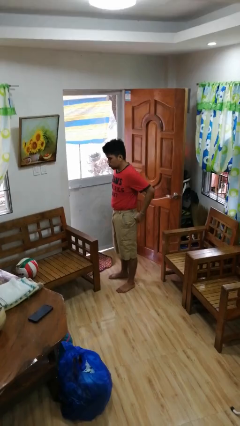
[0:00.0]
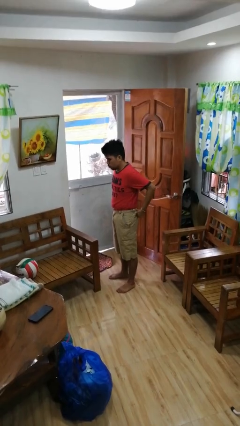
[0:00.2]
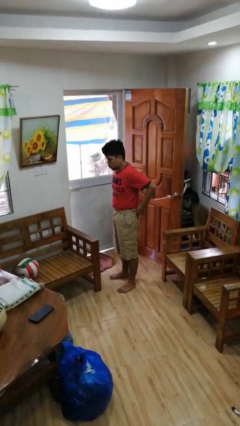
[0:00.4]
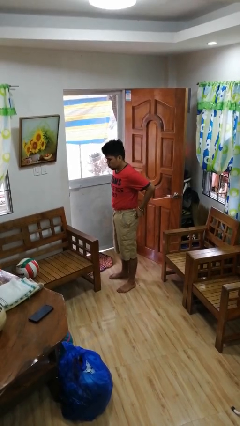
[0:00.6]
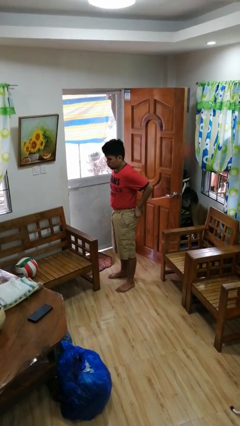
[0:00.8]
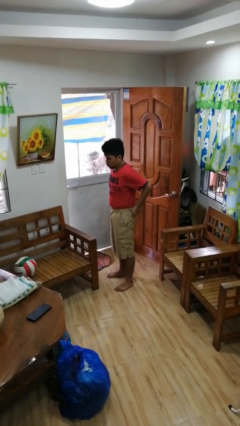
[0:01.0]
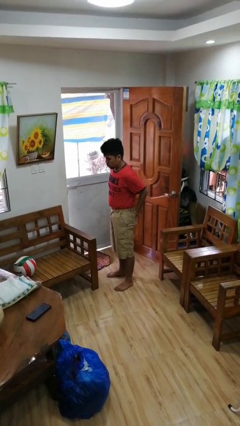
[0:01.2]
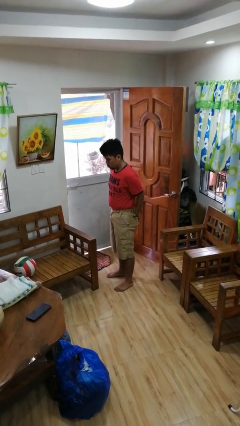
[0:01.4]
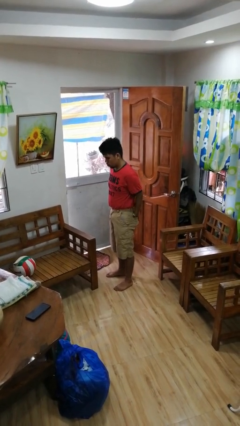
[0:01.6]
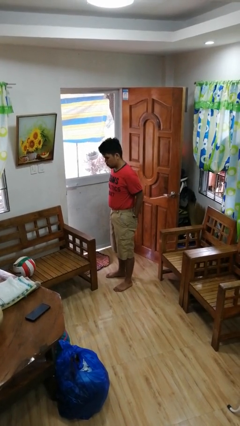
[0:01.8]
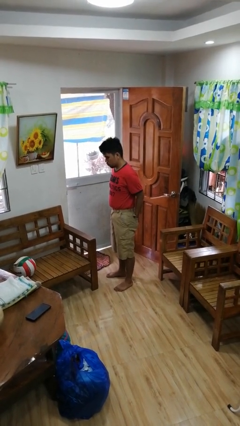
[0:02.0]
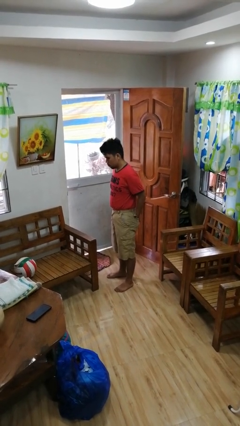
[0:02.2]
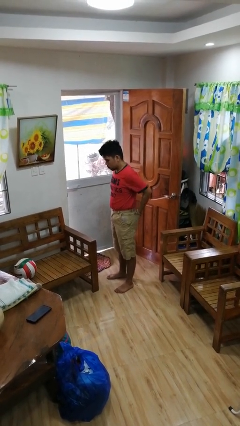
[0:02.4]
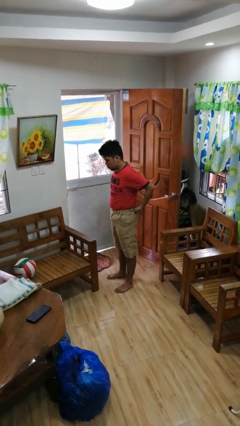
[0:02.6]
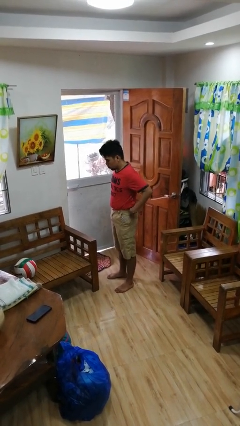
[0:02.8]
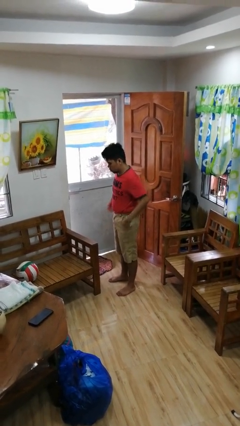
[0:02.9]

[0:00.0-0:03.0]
person puts hands in back pockets

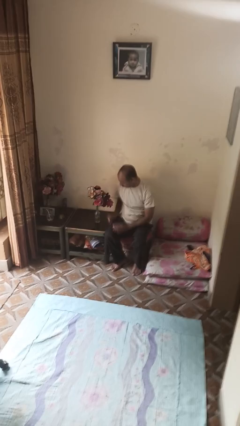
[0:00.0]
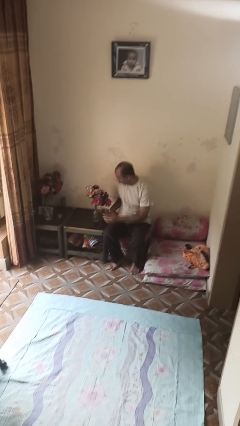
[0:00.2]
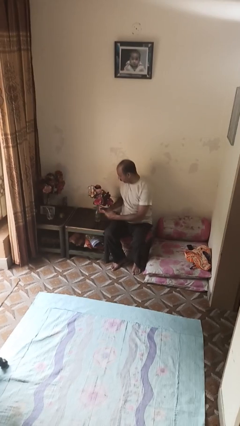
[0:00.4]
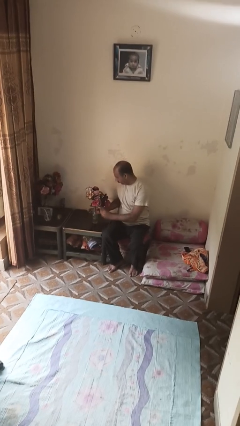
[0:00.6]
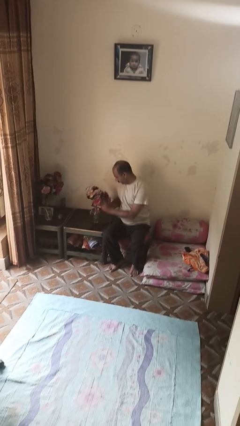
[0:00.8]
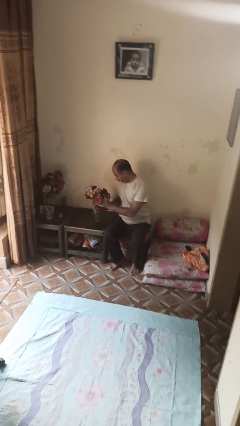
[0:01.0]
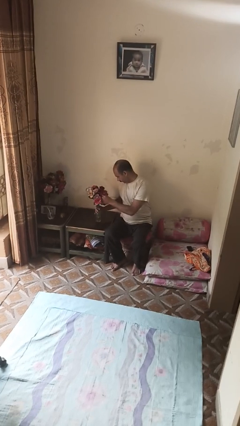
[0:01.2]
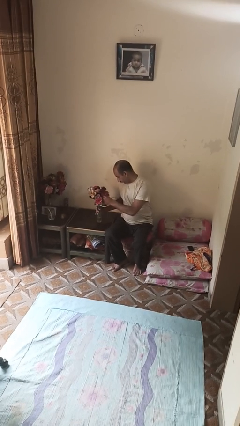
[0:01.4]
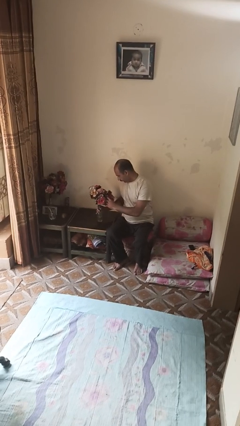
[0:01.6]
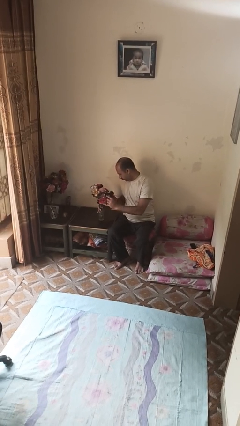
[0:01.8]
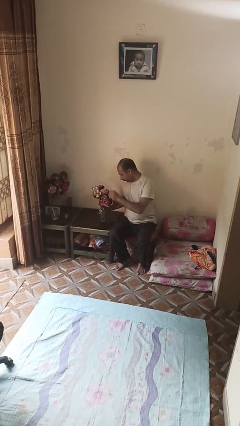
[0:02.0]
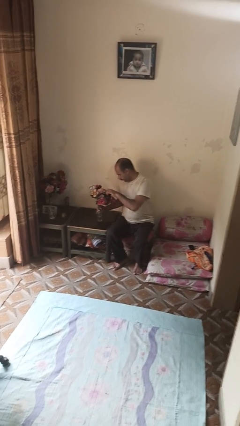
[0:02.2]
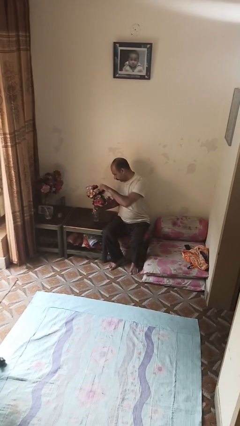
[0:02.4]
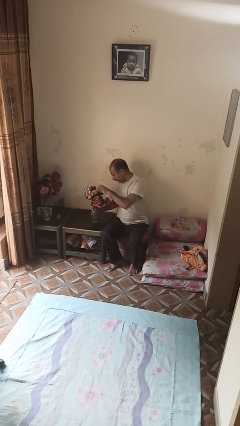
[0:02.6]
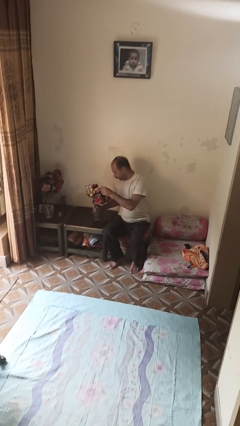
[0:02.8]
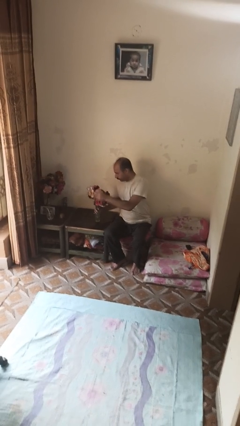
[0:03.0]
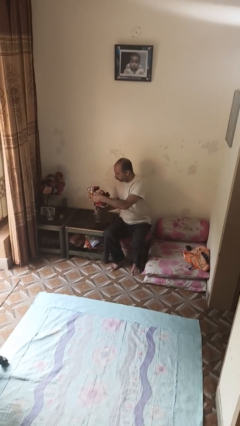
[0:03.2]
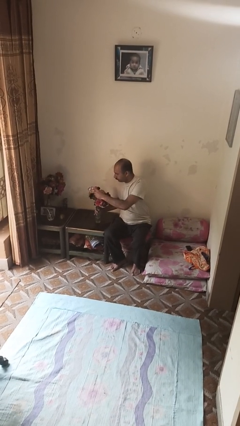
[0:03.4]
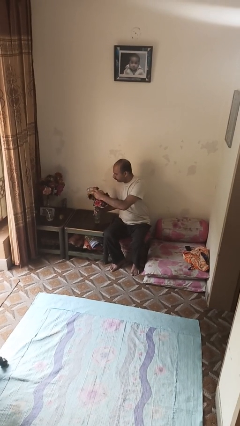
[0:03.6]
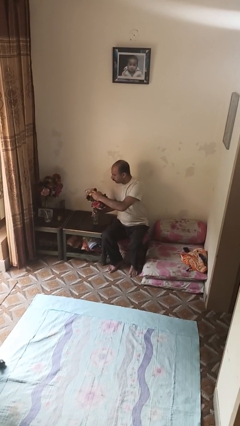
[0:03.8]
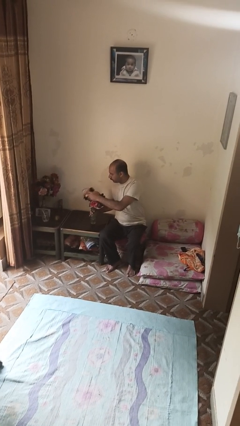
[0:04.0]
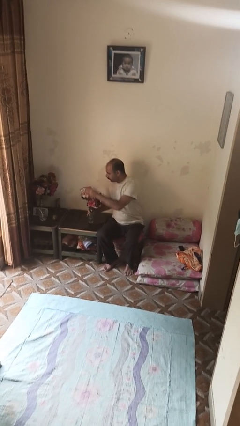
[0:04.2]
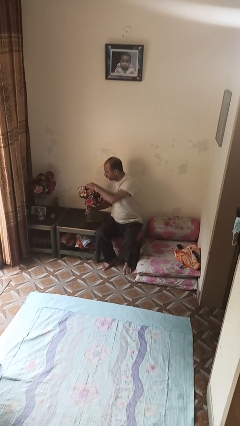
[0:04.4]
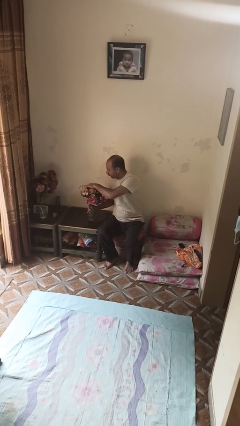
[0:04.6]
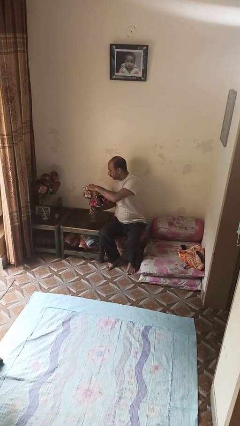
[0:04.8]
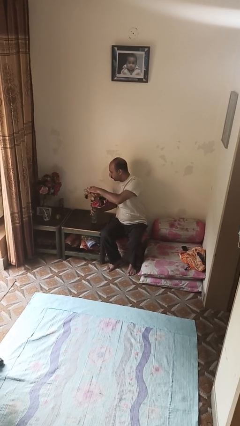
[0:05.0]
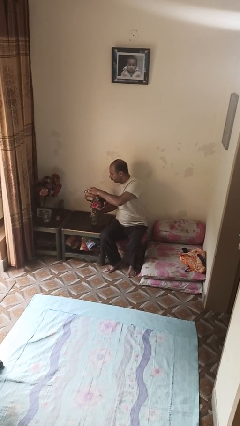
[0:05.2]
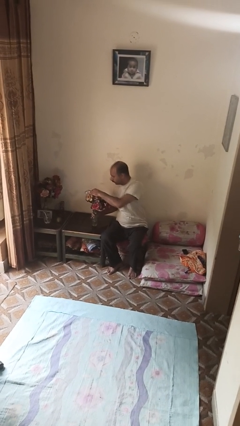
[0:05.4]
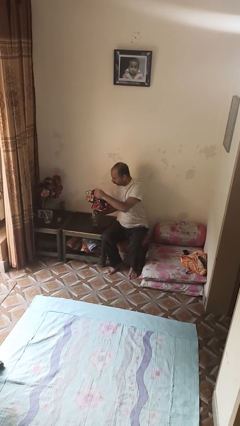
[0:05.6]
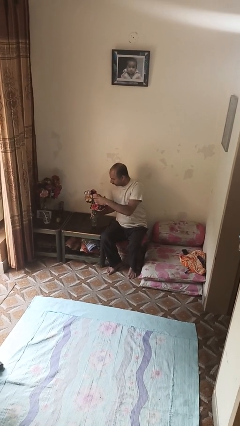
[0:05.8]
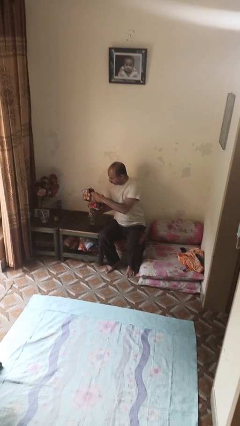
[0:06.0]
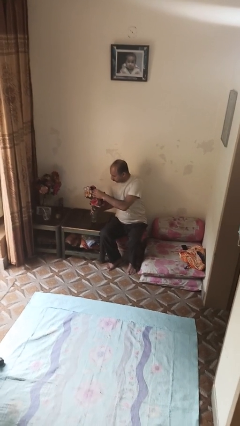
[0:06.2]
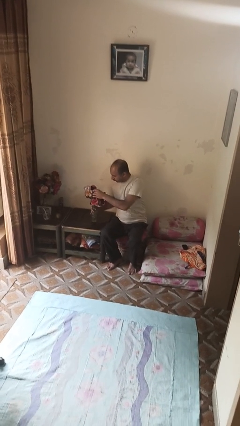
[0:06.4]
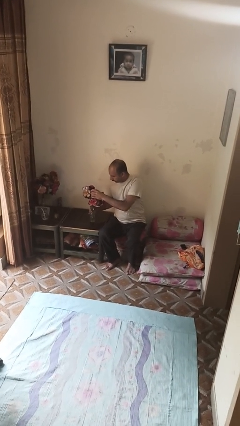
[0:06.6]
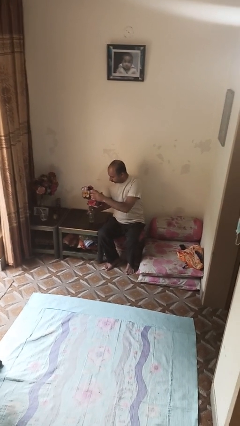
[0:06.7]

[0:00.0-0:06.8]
person arranges flowers in vase

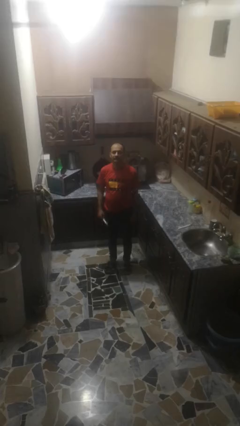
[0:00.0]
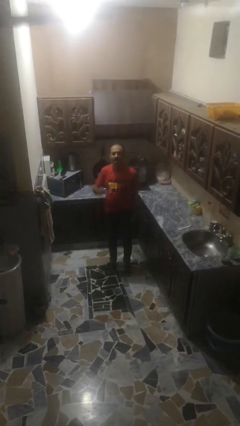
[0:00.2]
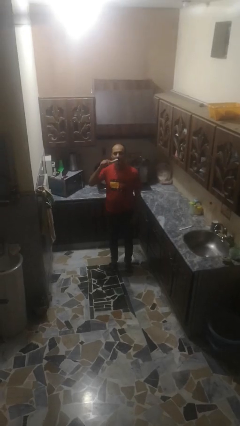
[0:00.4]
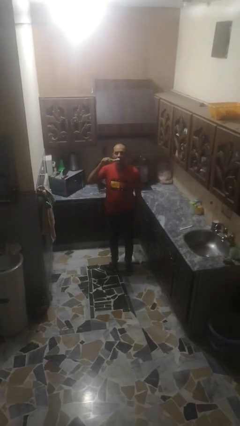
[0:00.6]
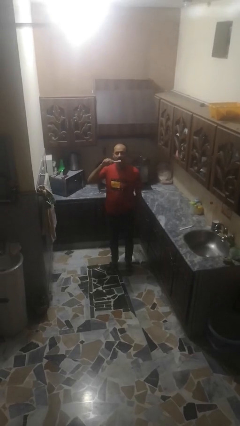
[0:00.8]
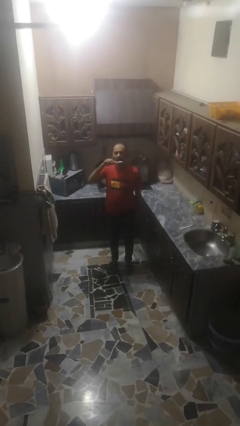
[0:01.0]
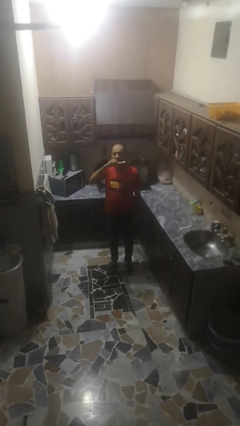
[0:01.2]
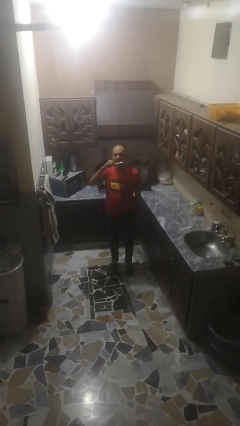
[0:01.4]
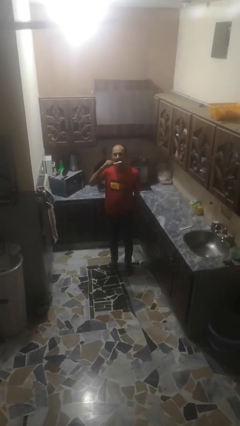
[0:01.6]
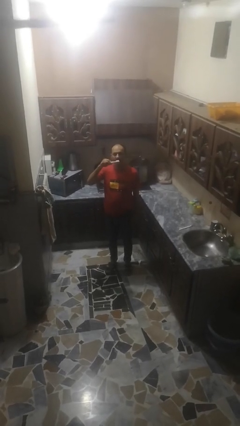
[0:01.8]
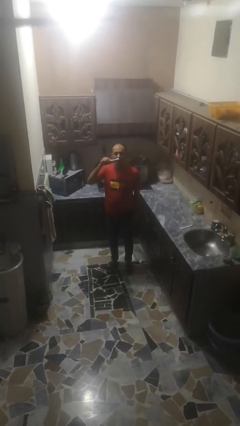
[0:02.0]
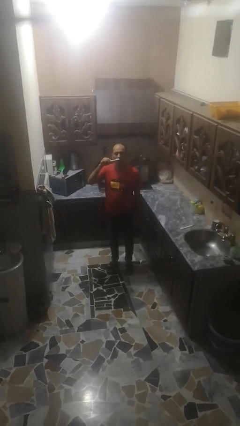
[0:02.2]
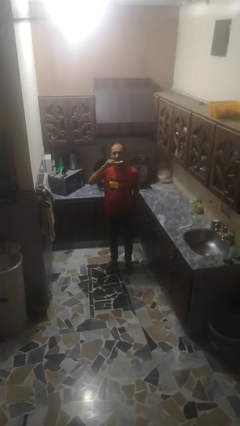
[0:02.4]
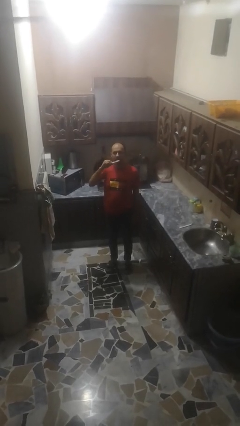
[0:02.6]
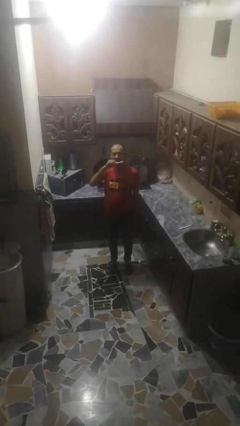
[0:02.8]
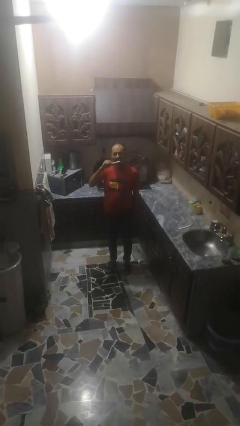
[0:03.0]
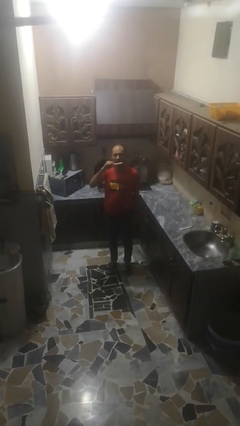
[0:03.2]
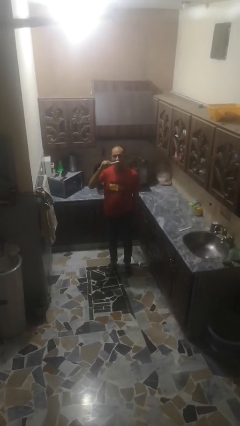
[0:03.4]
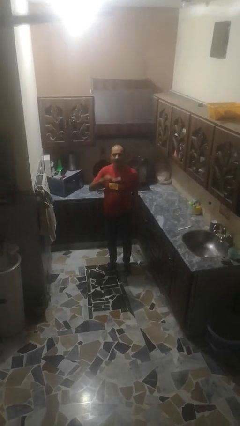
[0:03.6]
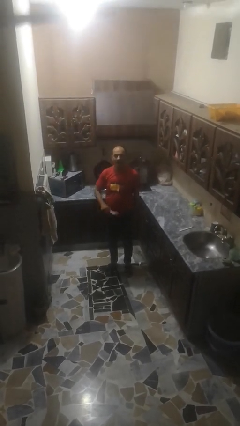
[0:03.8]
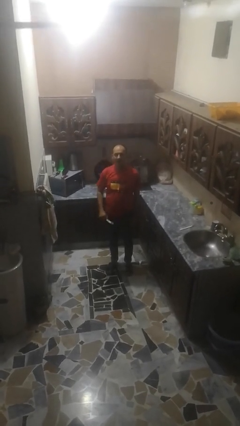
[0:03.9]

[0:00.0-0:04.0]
person brushes teeth

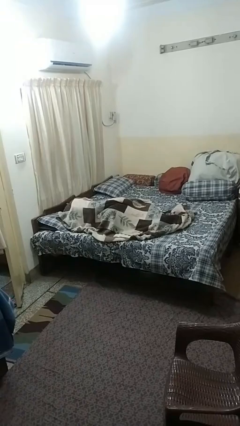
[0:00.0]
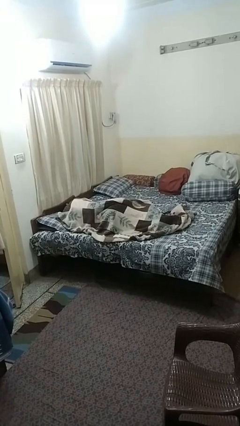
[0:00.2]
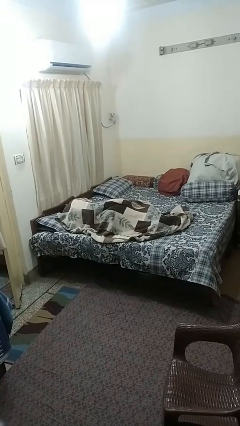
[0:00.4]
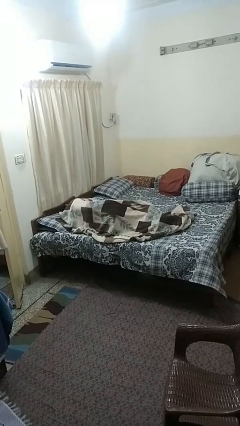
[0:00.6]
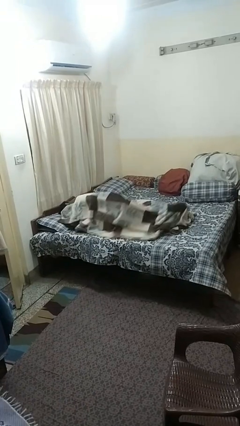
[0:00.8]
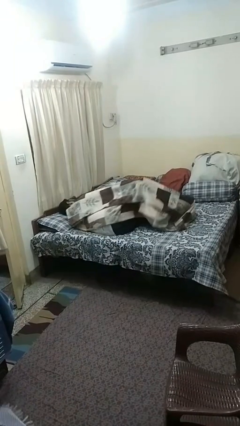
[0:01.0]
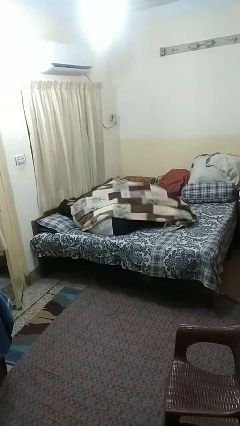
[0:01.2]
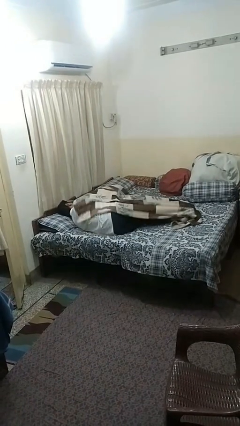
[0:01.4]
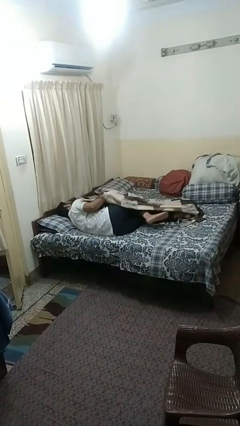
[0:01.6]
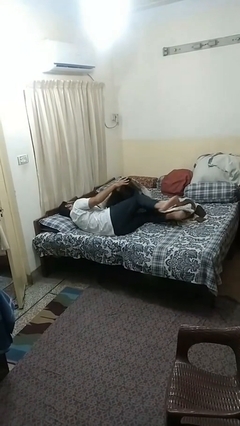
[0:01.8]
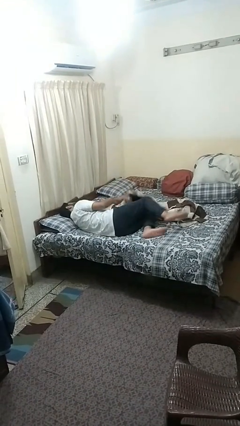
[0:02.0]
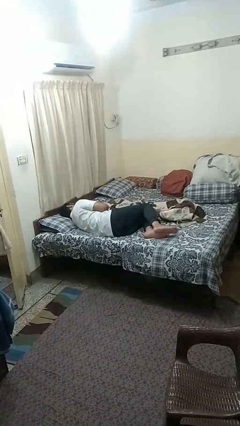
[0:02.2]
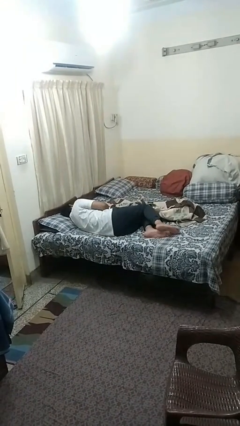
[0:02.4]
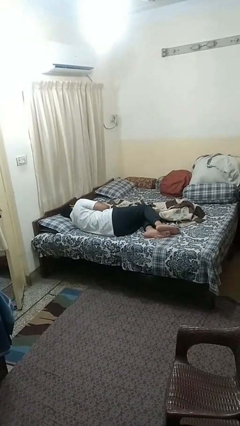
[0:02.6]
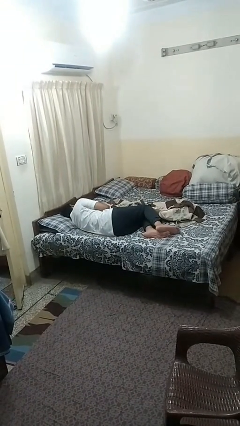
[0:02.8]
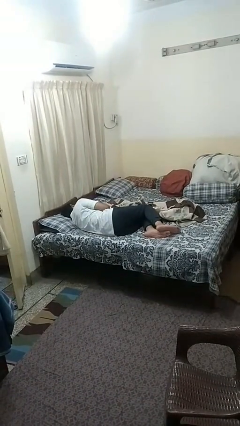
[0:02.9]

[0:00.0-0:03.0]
person uncovers with blanket

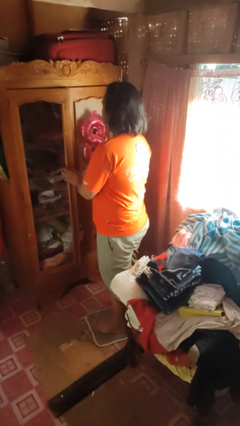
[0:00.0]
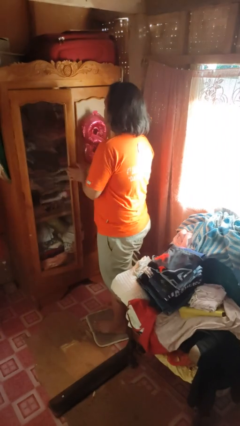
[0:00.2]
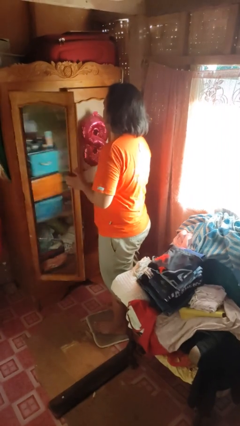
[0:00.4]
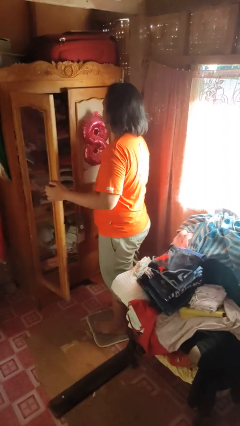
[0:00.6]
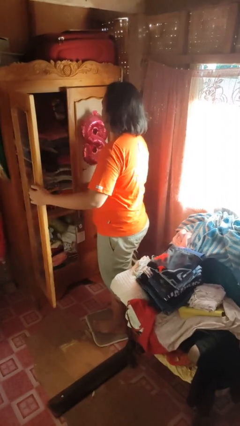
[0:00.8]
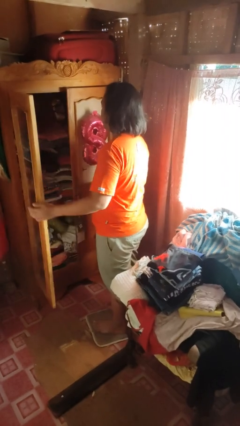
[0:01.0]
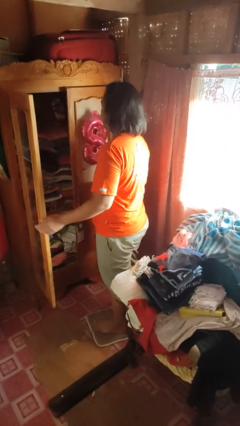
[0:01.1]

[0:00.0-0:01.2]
person opens dresser drawer
